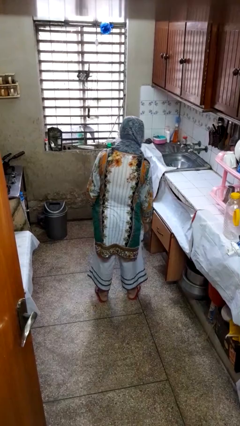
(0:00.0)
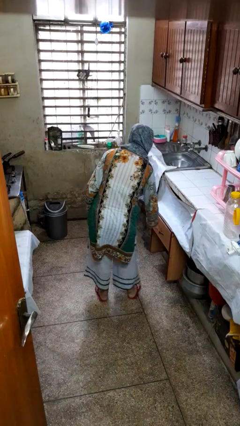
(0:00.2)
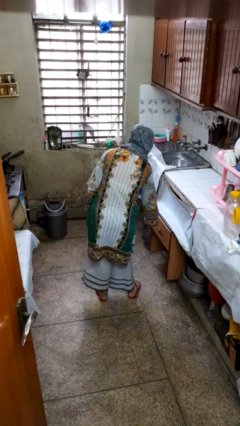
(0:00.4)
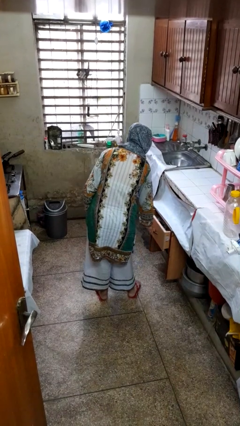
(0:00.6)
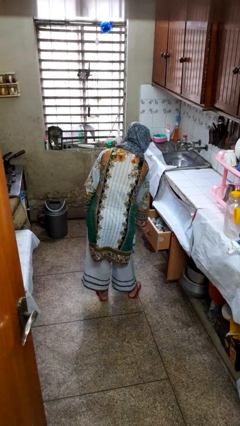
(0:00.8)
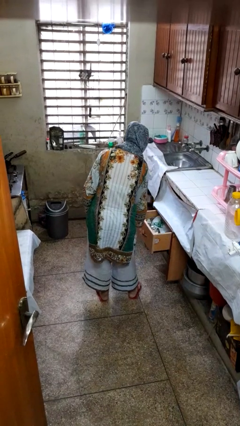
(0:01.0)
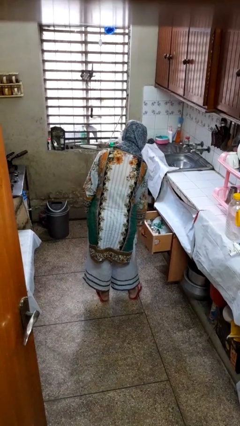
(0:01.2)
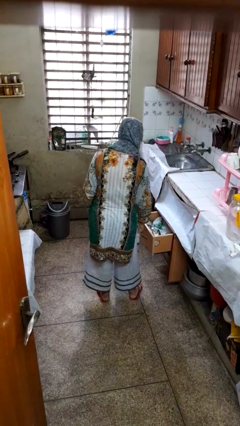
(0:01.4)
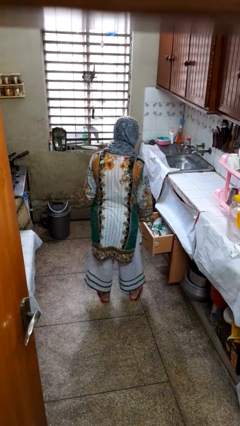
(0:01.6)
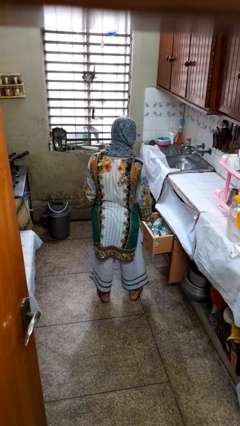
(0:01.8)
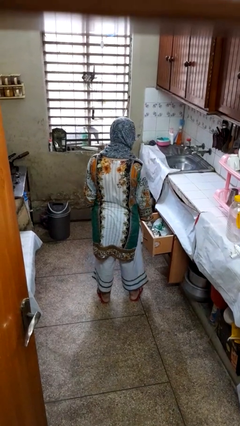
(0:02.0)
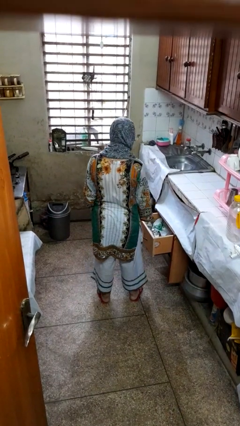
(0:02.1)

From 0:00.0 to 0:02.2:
person opens kitchen drawer

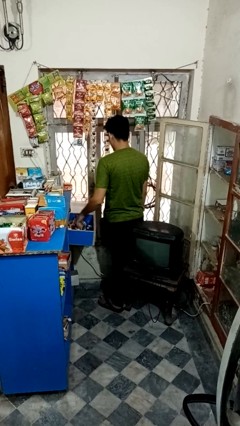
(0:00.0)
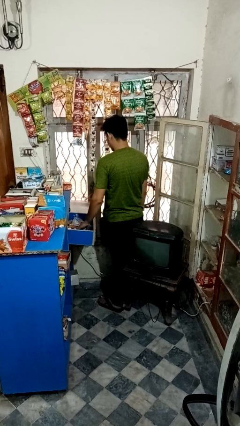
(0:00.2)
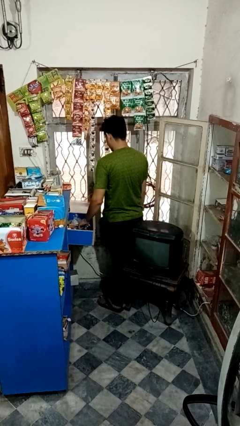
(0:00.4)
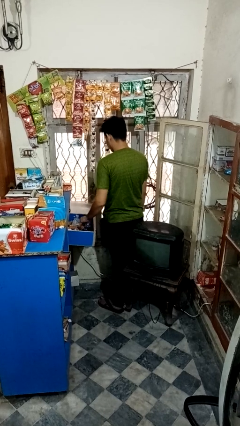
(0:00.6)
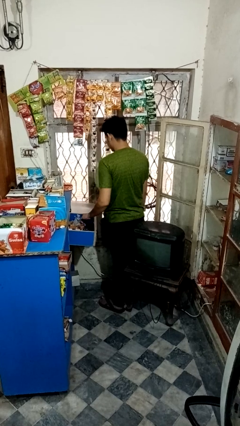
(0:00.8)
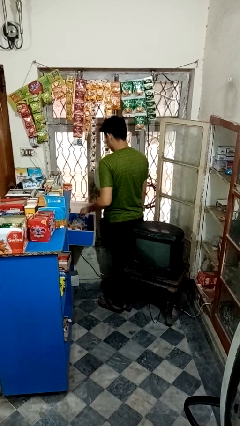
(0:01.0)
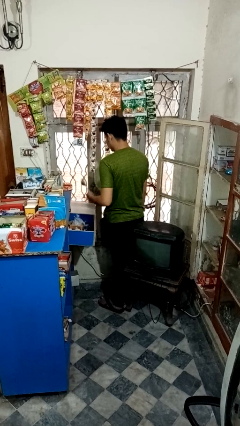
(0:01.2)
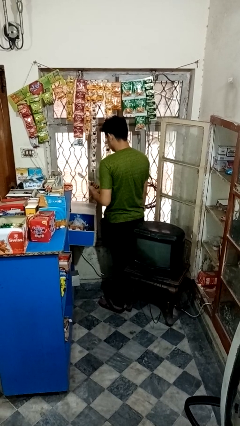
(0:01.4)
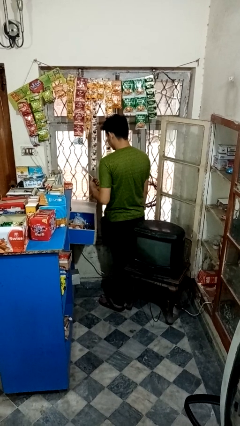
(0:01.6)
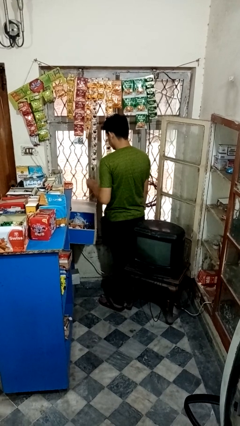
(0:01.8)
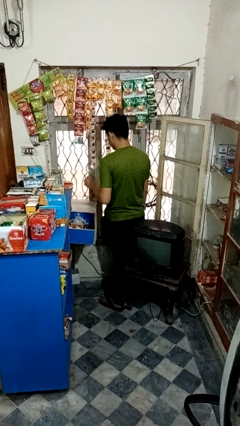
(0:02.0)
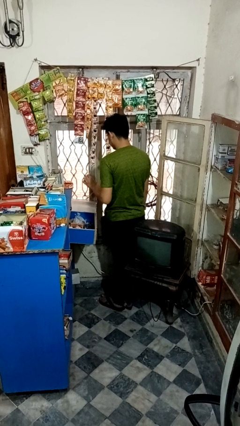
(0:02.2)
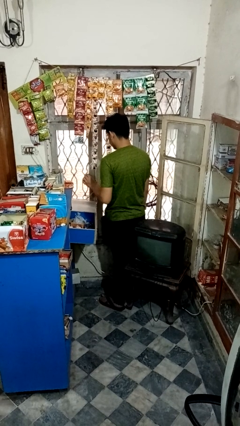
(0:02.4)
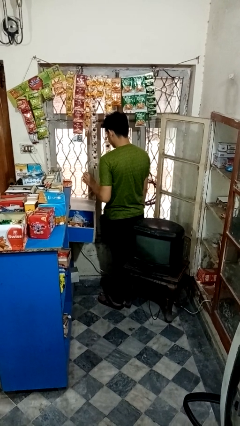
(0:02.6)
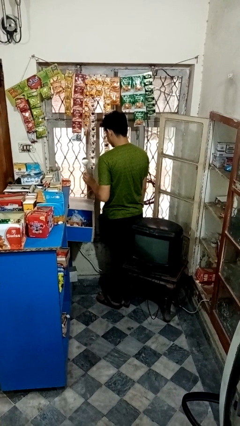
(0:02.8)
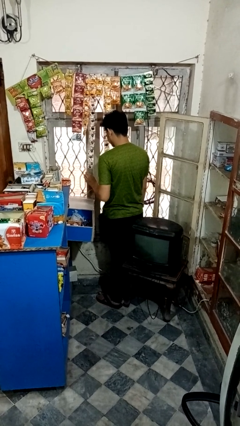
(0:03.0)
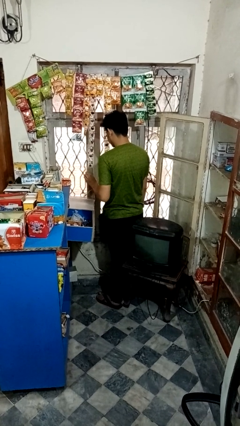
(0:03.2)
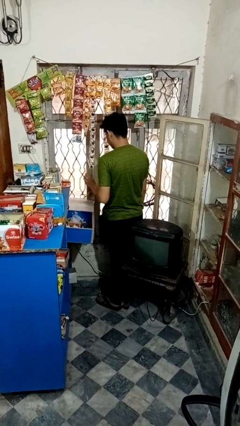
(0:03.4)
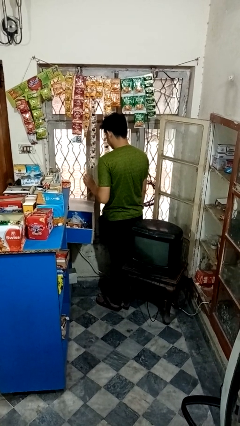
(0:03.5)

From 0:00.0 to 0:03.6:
person searches in kitchen drawer

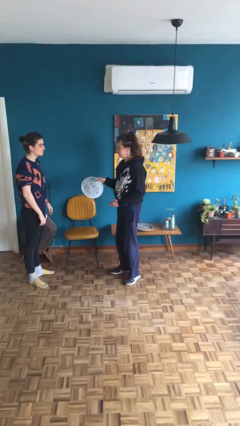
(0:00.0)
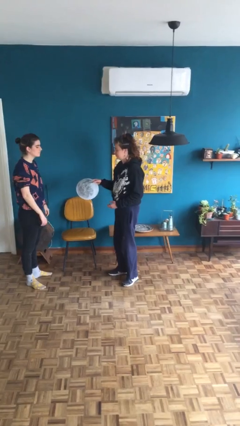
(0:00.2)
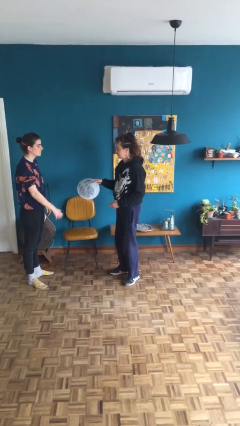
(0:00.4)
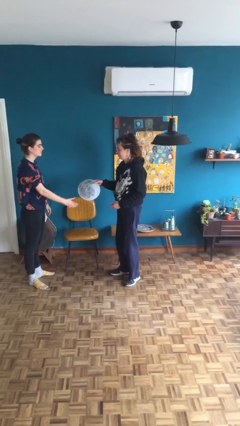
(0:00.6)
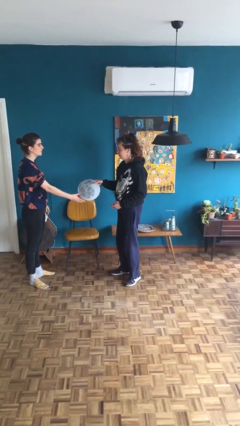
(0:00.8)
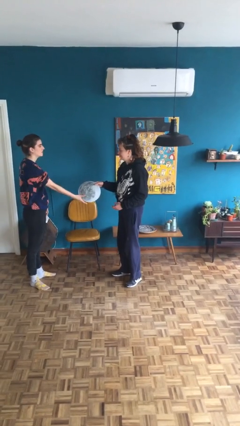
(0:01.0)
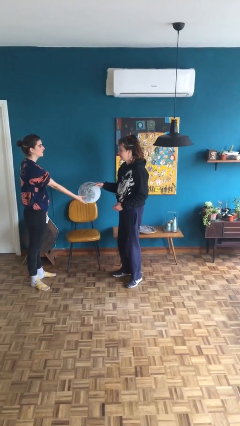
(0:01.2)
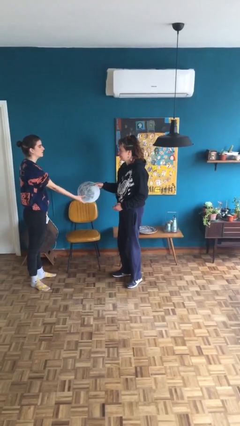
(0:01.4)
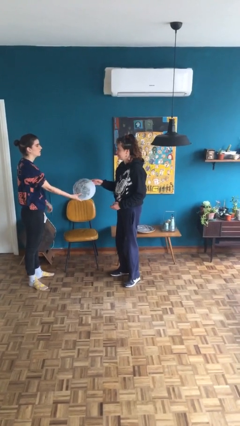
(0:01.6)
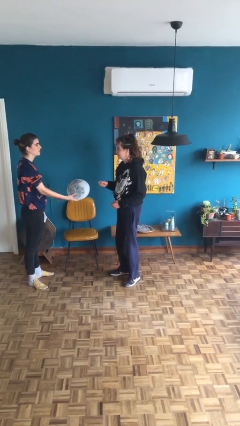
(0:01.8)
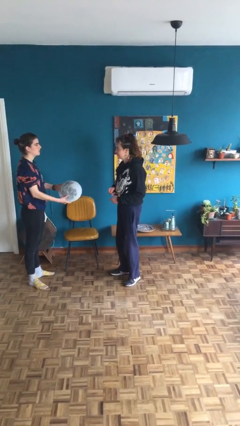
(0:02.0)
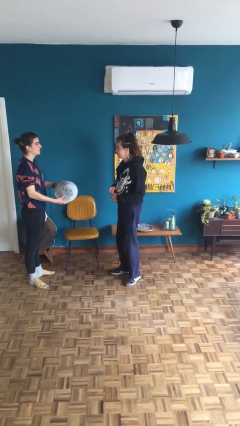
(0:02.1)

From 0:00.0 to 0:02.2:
person transfers object to person

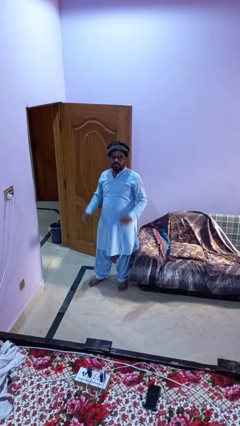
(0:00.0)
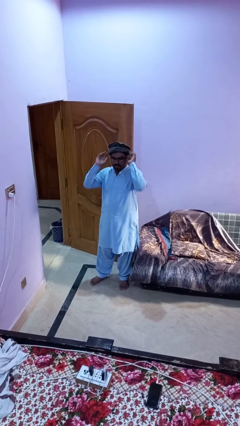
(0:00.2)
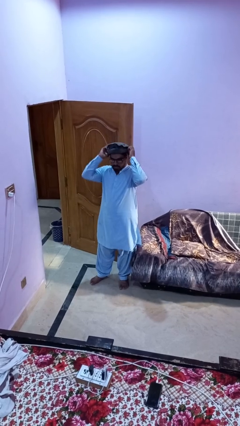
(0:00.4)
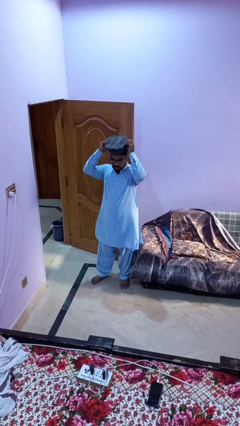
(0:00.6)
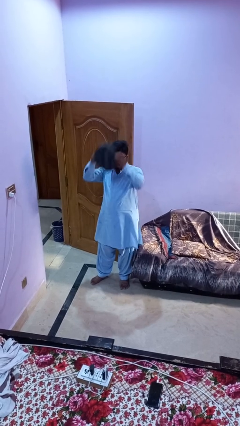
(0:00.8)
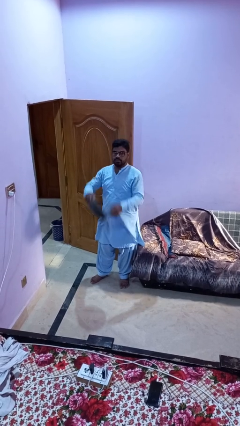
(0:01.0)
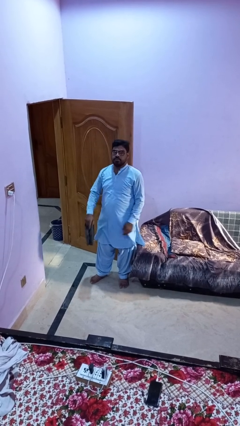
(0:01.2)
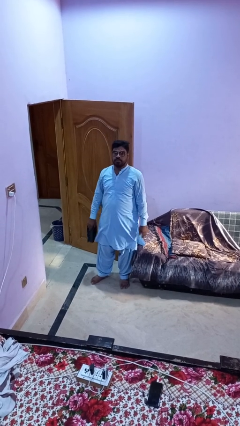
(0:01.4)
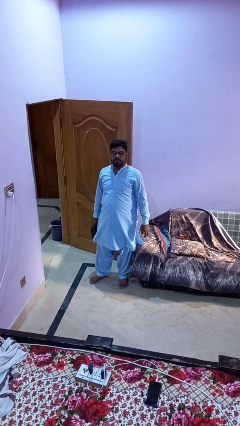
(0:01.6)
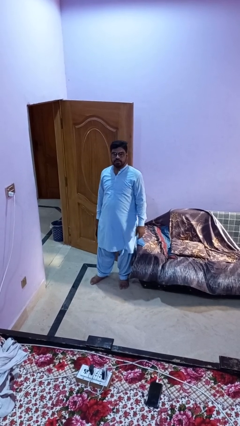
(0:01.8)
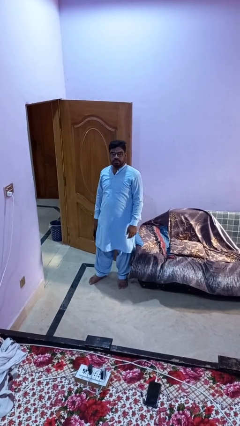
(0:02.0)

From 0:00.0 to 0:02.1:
person takes off hat

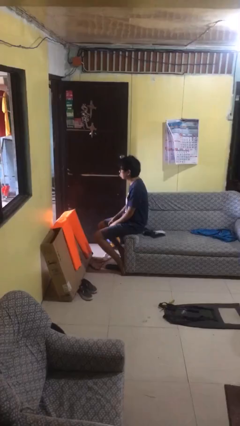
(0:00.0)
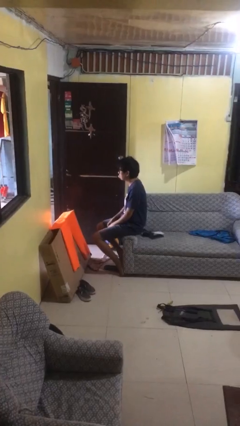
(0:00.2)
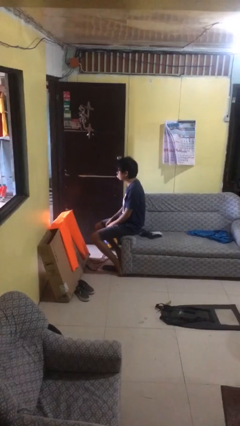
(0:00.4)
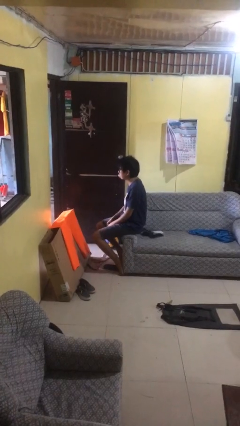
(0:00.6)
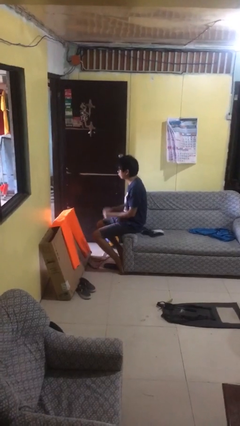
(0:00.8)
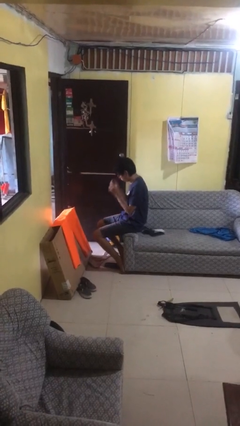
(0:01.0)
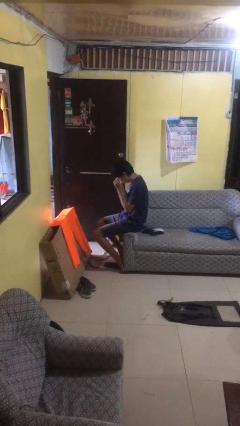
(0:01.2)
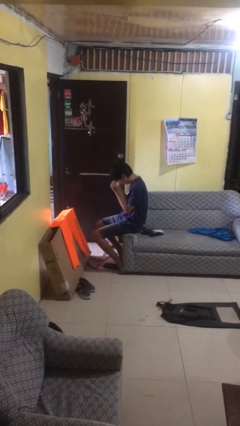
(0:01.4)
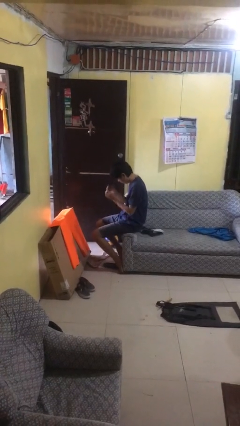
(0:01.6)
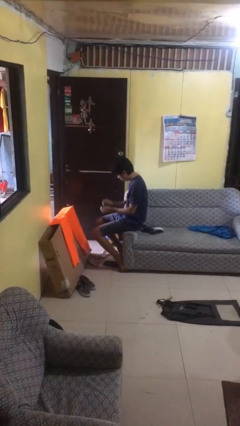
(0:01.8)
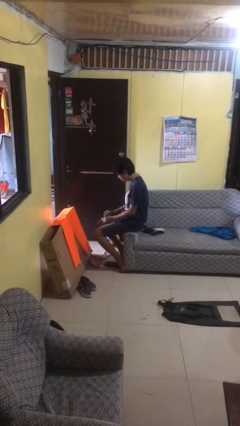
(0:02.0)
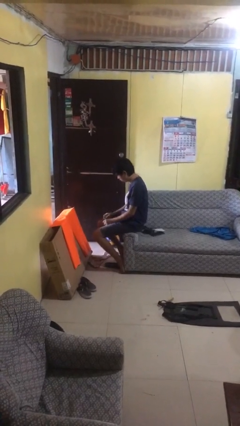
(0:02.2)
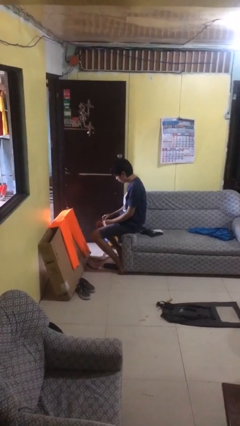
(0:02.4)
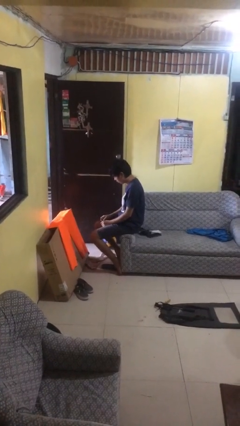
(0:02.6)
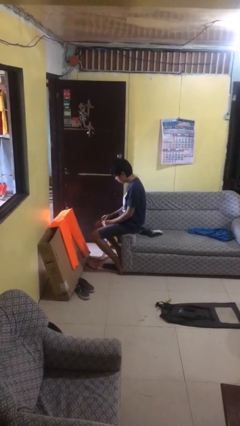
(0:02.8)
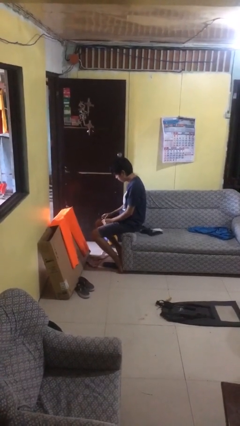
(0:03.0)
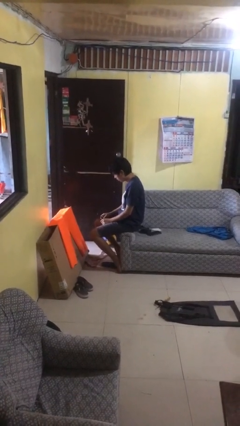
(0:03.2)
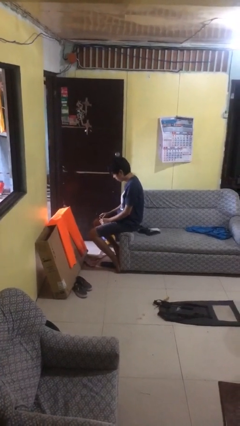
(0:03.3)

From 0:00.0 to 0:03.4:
person takes off glasses

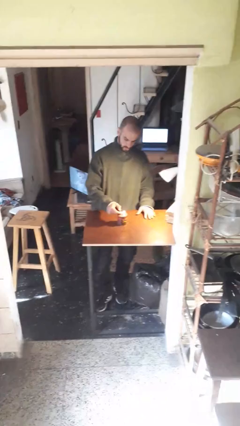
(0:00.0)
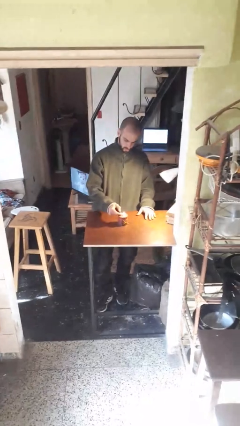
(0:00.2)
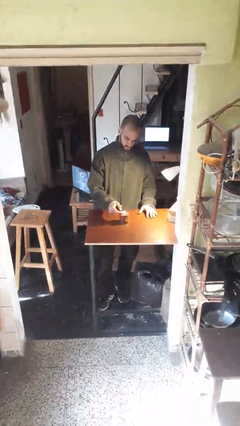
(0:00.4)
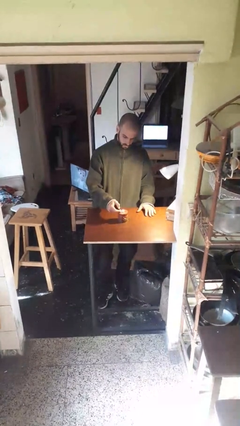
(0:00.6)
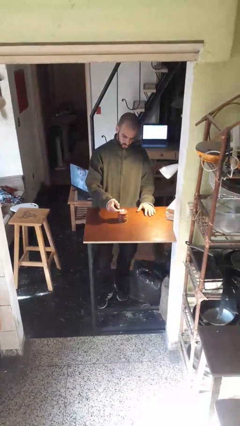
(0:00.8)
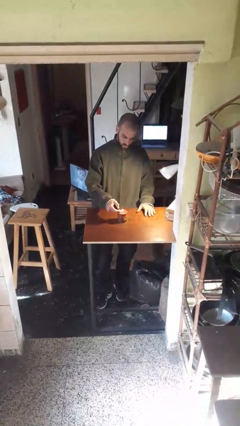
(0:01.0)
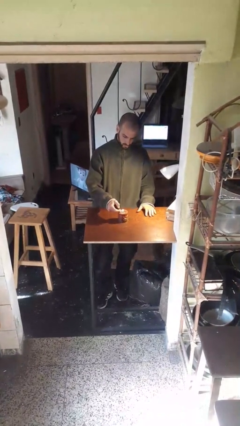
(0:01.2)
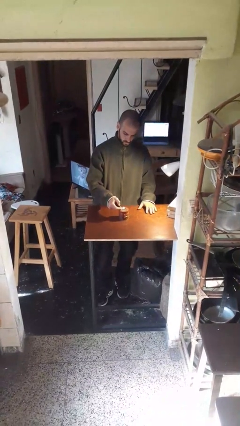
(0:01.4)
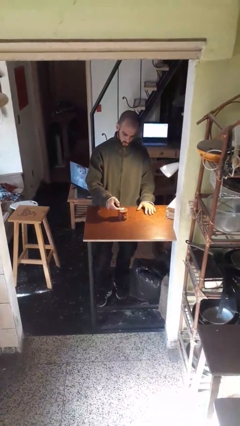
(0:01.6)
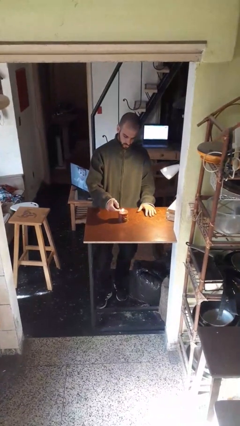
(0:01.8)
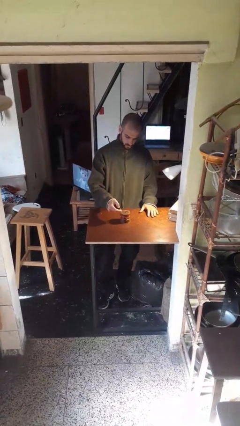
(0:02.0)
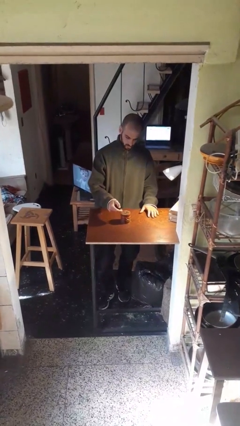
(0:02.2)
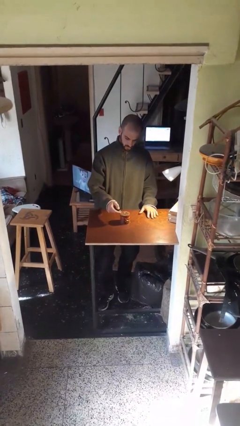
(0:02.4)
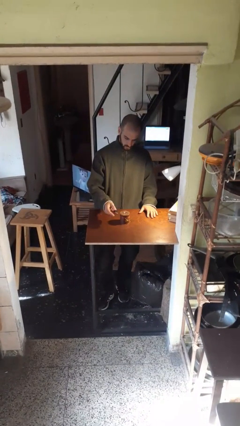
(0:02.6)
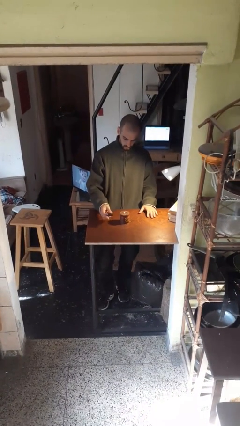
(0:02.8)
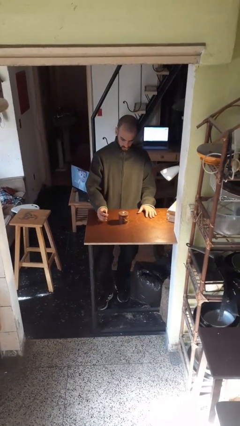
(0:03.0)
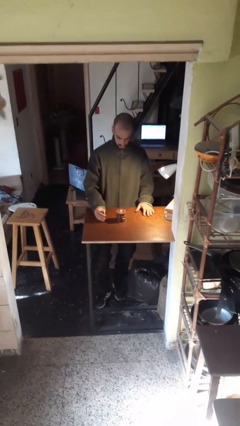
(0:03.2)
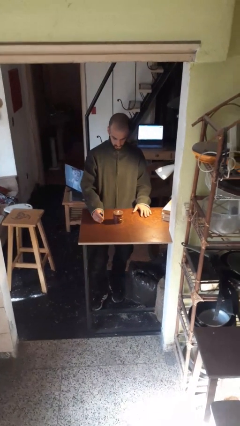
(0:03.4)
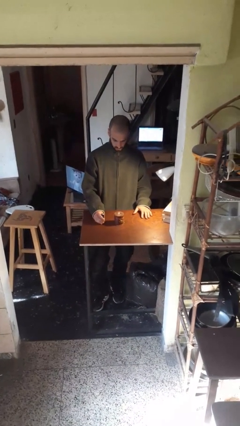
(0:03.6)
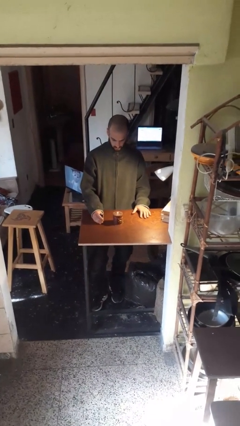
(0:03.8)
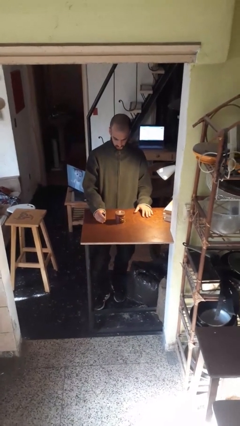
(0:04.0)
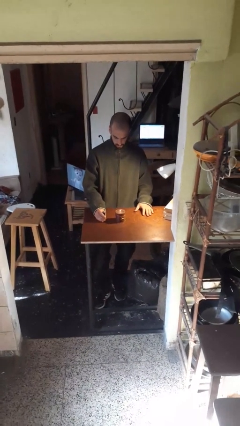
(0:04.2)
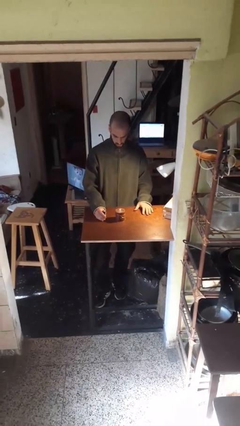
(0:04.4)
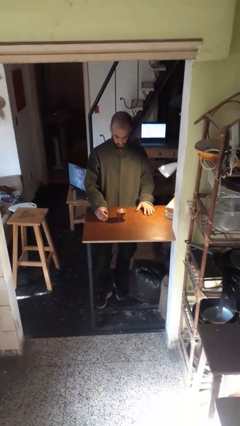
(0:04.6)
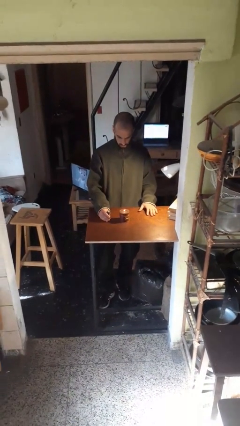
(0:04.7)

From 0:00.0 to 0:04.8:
person lights candle
